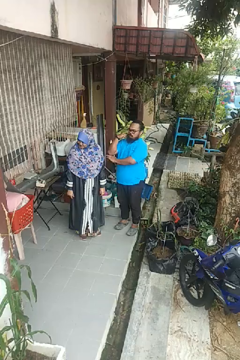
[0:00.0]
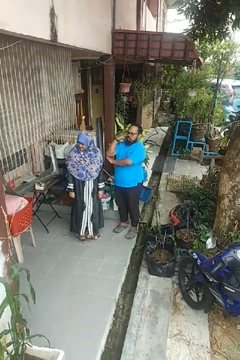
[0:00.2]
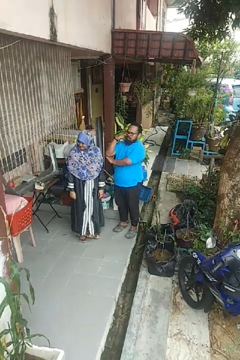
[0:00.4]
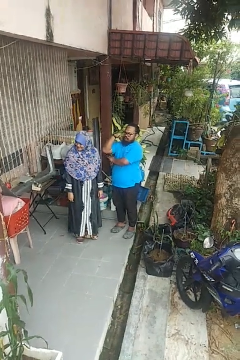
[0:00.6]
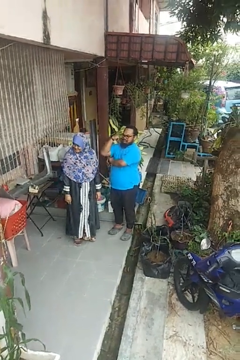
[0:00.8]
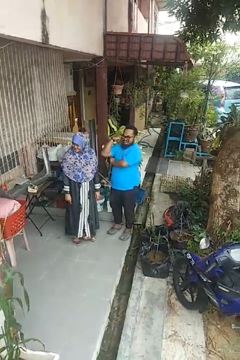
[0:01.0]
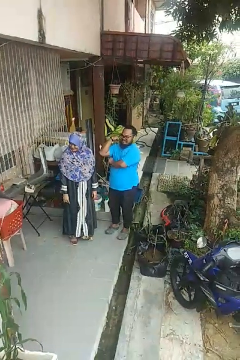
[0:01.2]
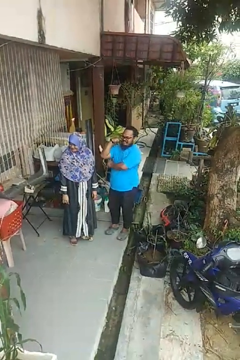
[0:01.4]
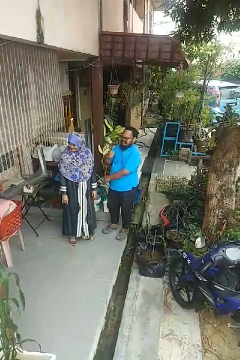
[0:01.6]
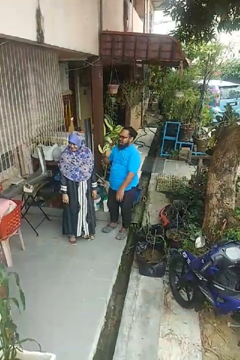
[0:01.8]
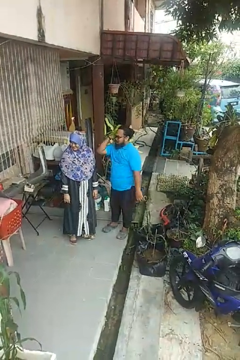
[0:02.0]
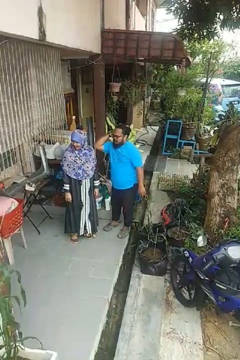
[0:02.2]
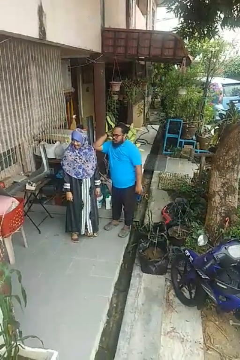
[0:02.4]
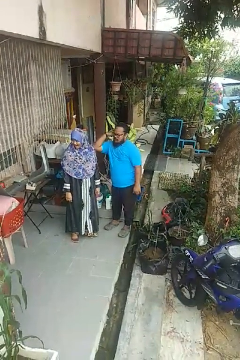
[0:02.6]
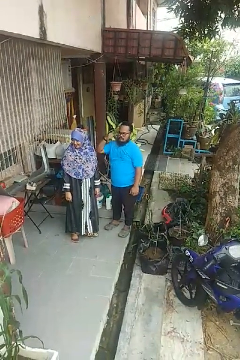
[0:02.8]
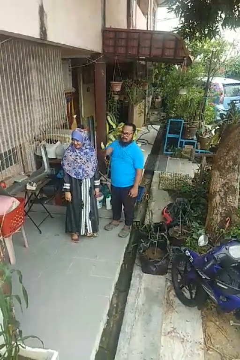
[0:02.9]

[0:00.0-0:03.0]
person nudges person with elbow

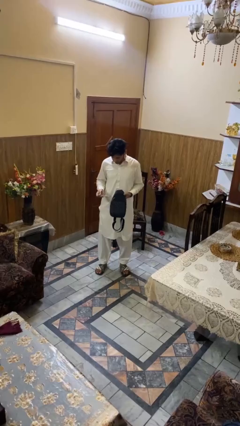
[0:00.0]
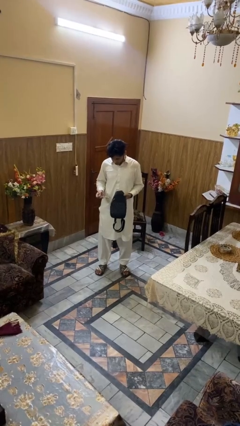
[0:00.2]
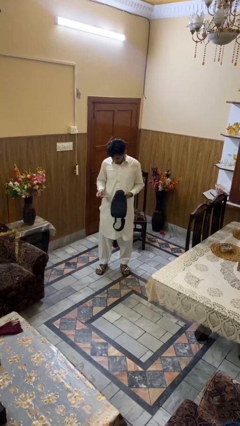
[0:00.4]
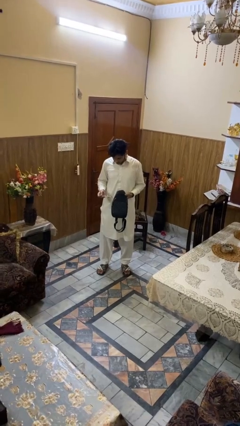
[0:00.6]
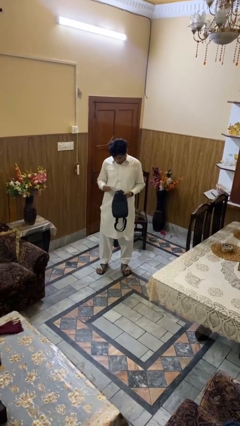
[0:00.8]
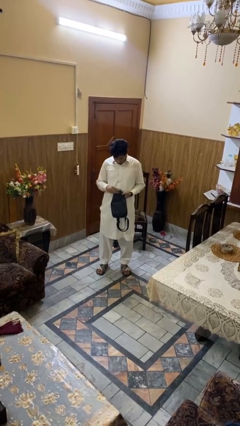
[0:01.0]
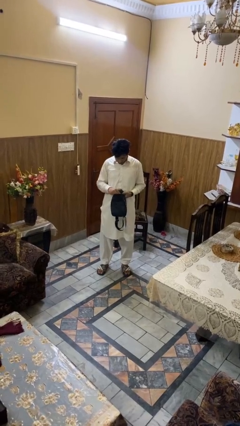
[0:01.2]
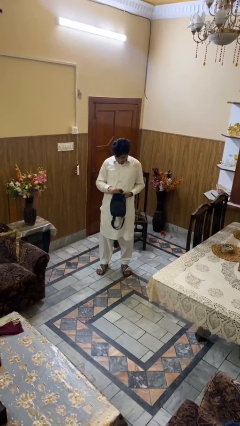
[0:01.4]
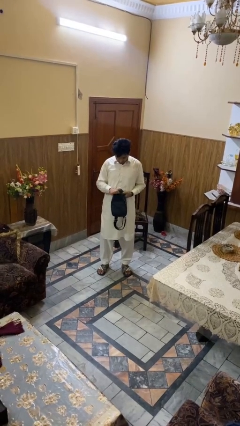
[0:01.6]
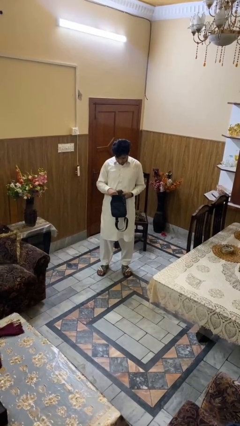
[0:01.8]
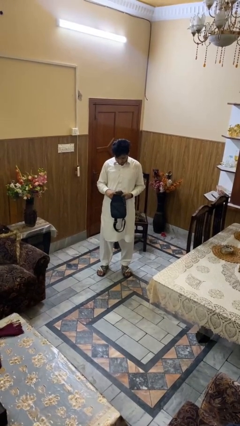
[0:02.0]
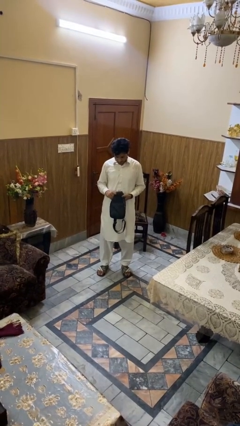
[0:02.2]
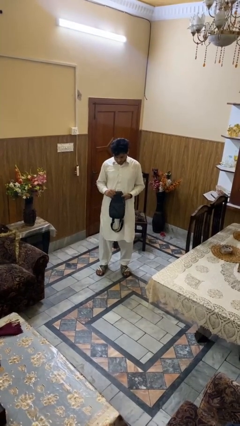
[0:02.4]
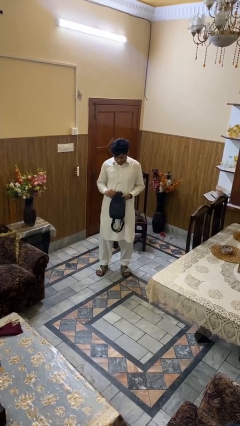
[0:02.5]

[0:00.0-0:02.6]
person puts object into purse

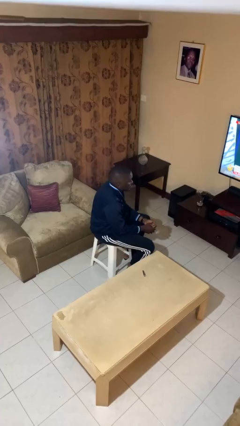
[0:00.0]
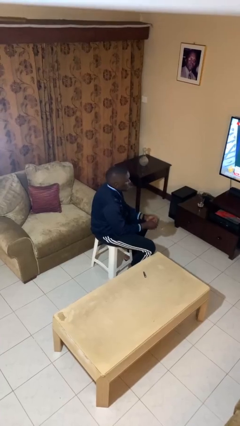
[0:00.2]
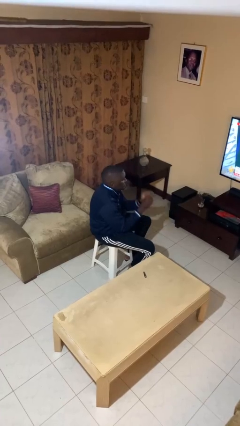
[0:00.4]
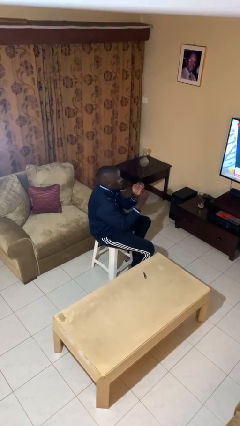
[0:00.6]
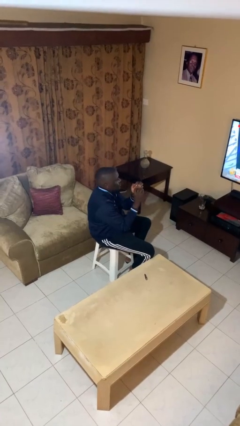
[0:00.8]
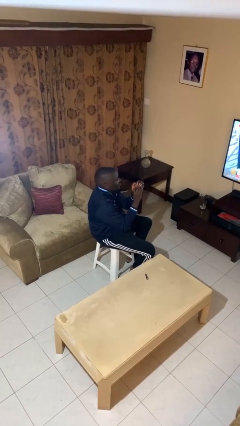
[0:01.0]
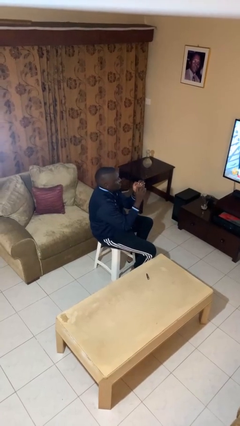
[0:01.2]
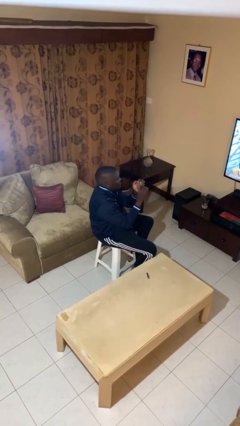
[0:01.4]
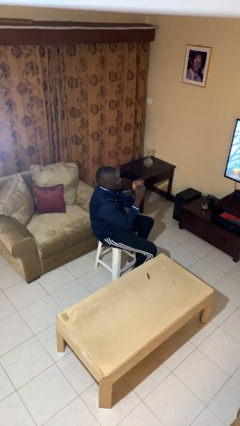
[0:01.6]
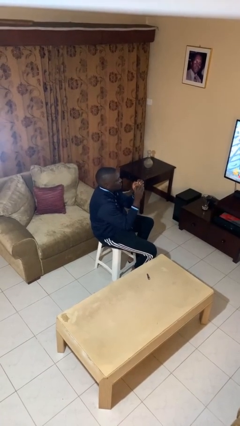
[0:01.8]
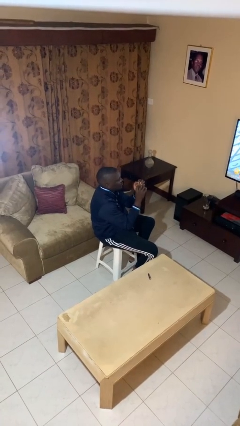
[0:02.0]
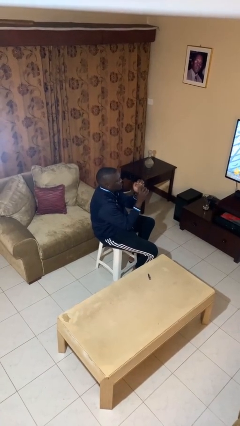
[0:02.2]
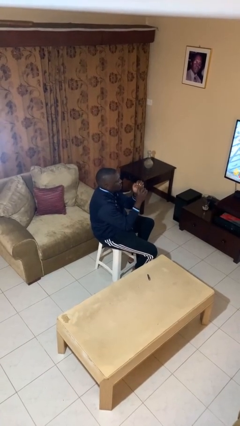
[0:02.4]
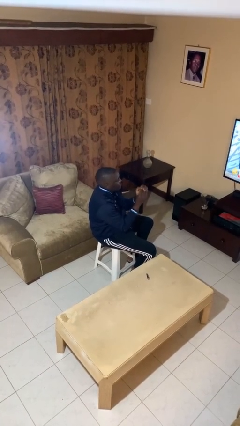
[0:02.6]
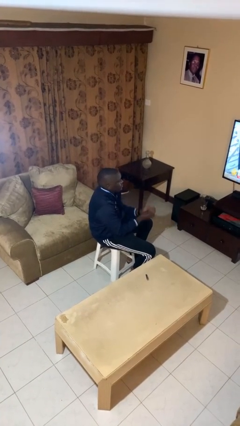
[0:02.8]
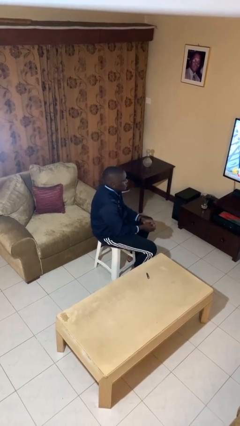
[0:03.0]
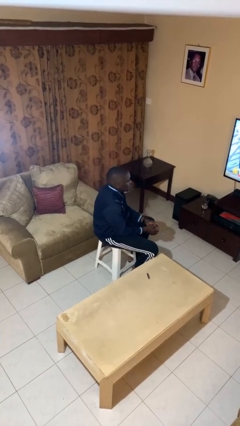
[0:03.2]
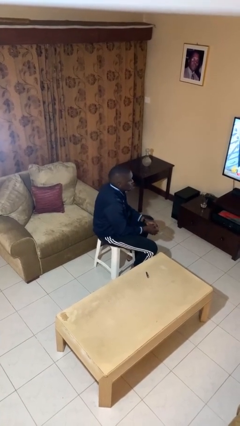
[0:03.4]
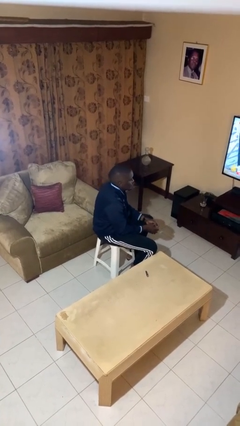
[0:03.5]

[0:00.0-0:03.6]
person files fingernails

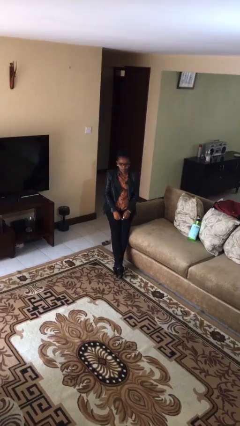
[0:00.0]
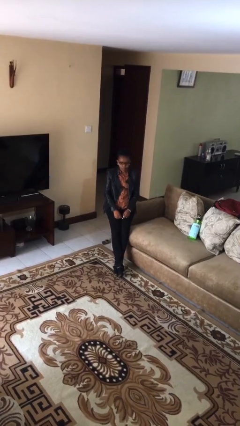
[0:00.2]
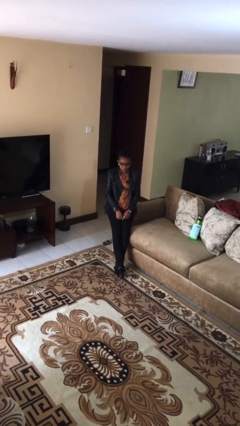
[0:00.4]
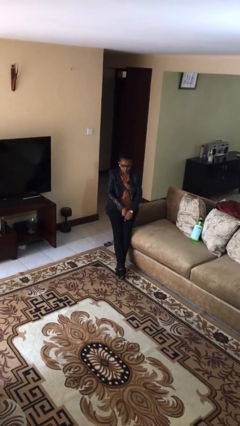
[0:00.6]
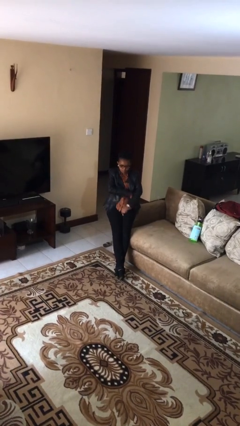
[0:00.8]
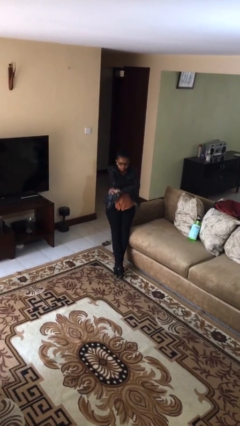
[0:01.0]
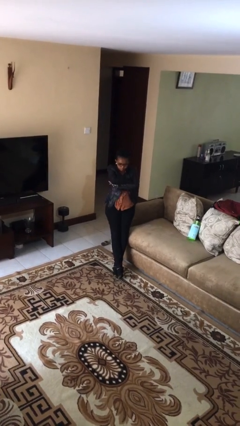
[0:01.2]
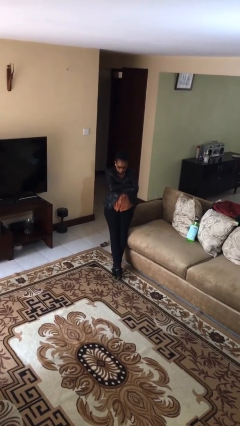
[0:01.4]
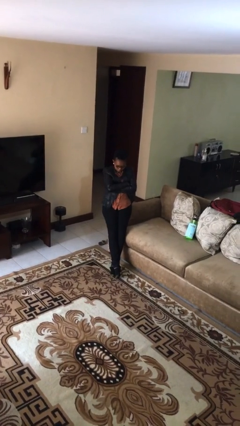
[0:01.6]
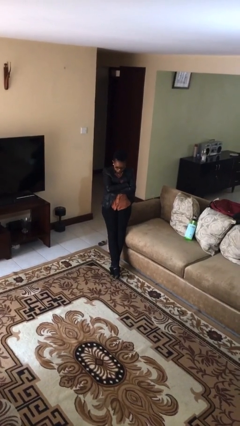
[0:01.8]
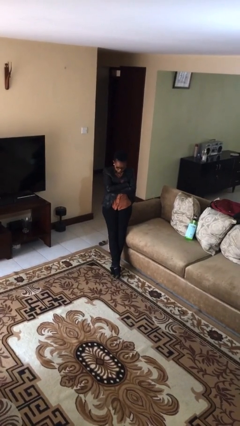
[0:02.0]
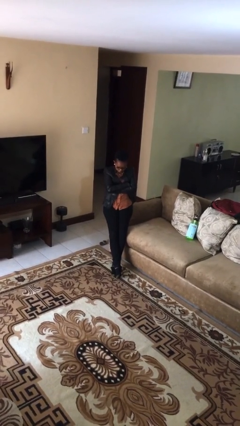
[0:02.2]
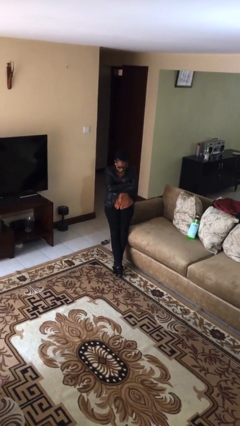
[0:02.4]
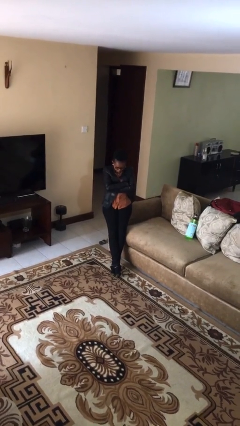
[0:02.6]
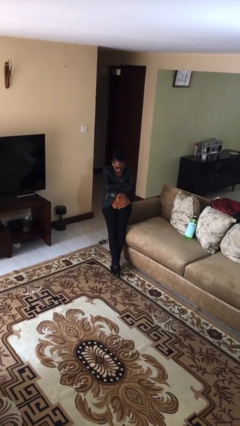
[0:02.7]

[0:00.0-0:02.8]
person crosses arms

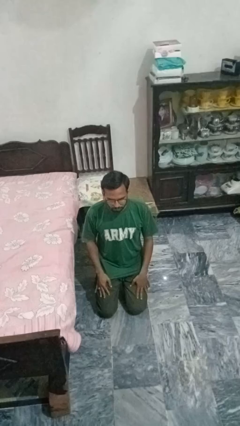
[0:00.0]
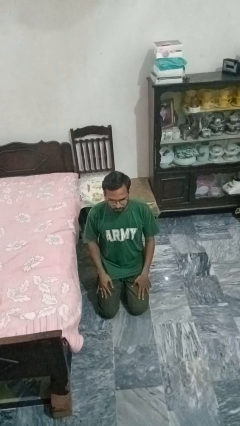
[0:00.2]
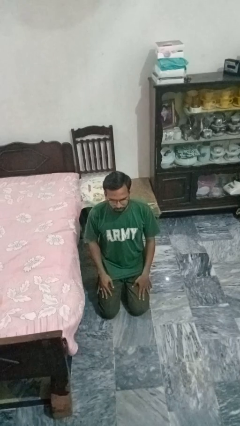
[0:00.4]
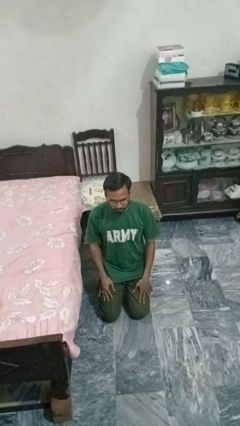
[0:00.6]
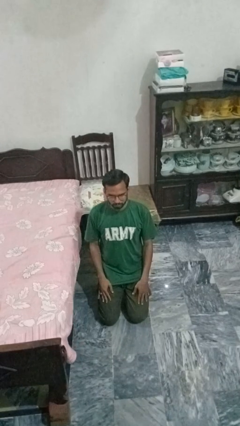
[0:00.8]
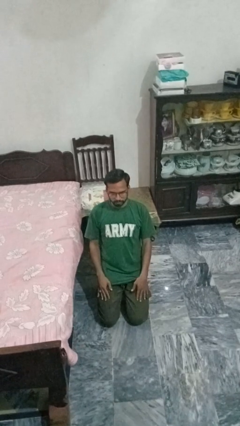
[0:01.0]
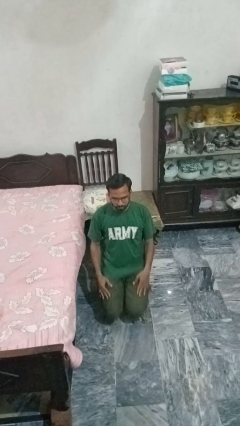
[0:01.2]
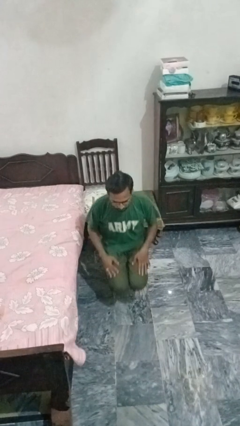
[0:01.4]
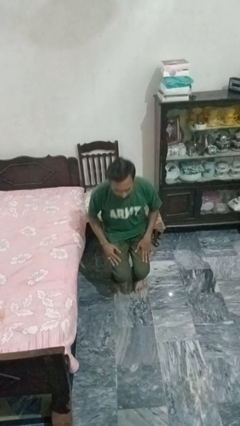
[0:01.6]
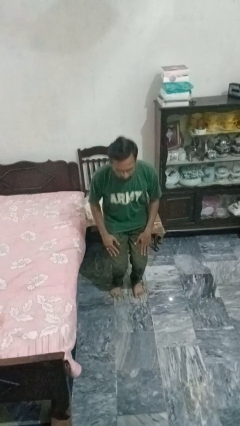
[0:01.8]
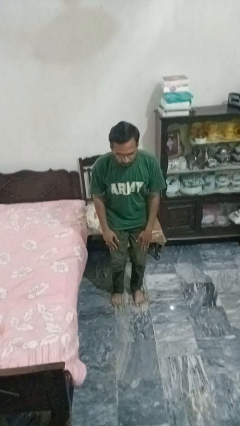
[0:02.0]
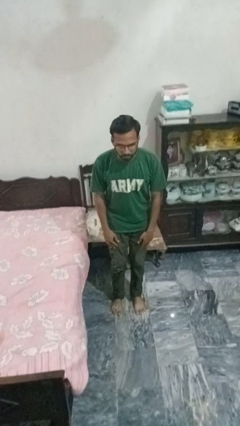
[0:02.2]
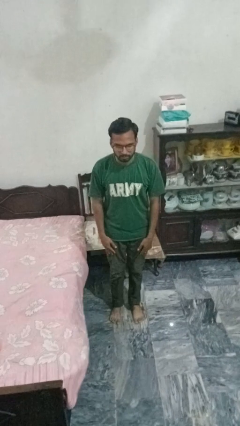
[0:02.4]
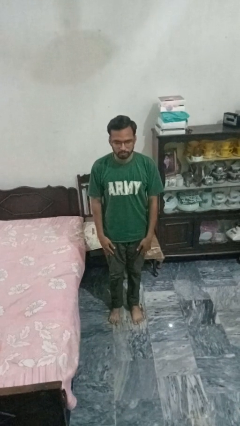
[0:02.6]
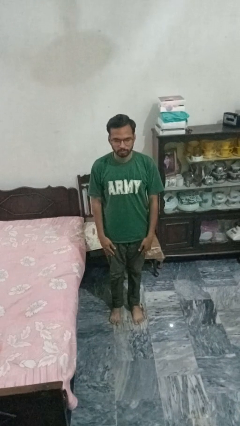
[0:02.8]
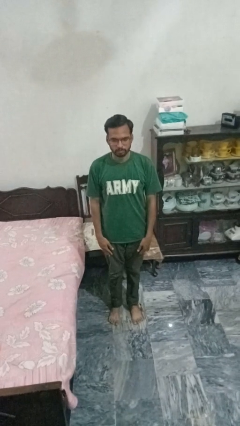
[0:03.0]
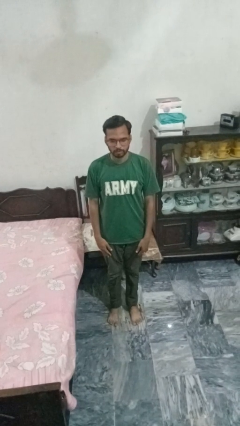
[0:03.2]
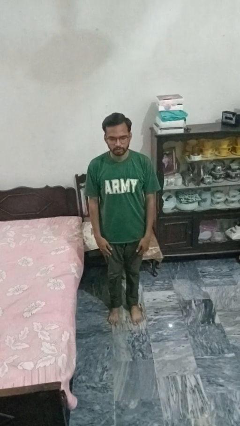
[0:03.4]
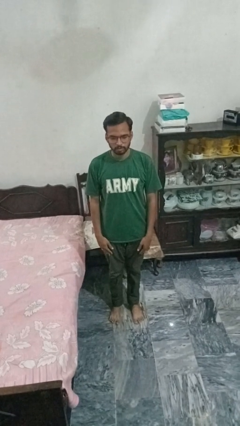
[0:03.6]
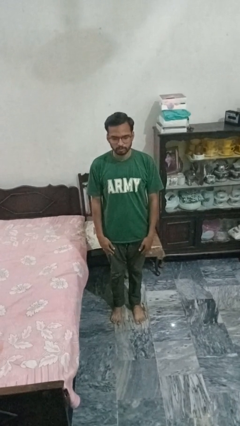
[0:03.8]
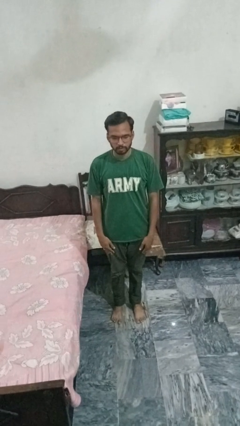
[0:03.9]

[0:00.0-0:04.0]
person stands up from floor

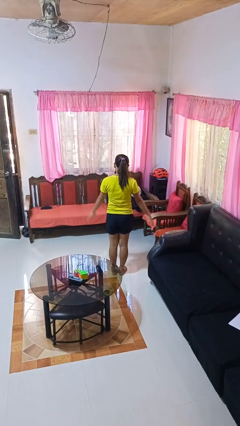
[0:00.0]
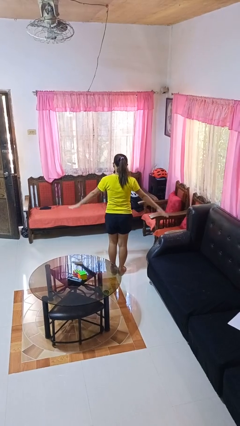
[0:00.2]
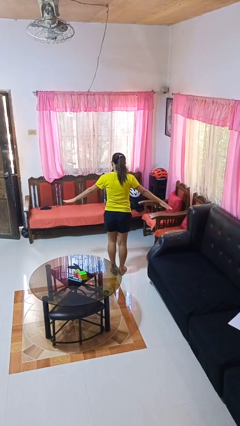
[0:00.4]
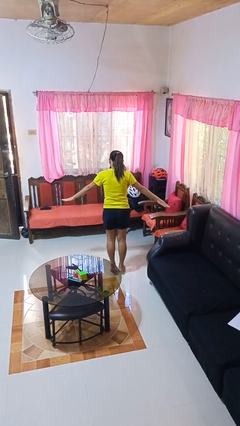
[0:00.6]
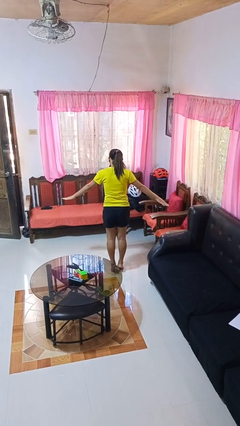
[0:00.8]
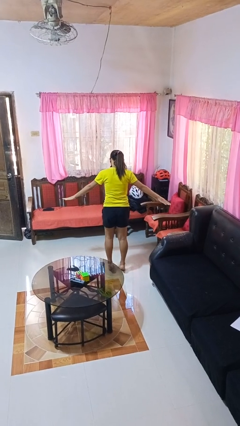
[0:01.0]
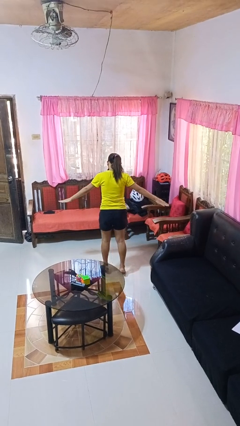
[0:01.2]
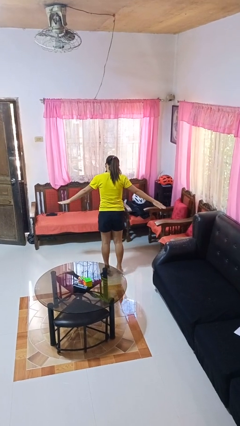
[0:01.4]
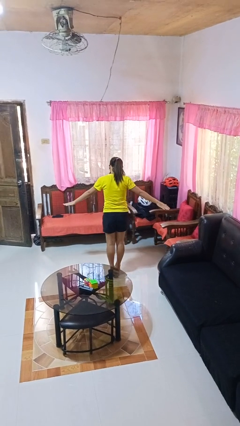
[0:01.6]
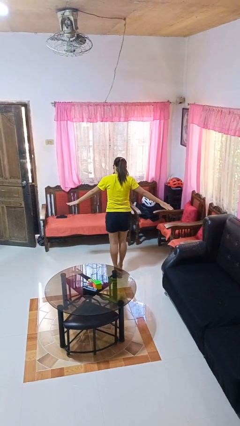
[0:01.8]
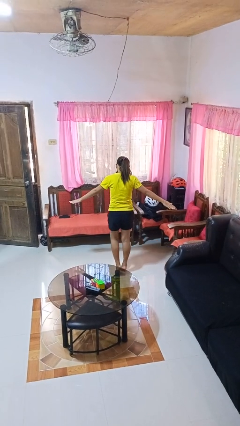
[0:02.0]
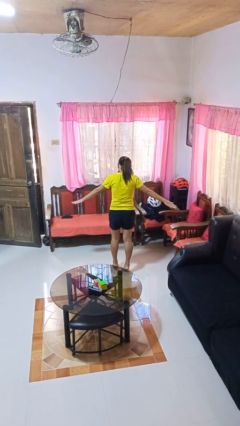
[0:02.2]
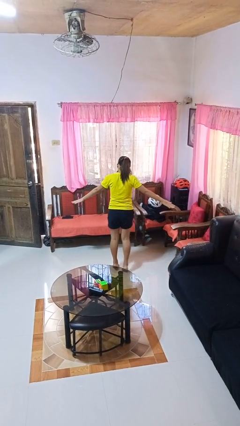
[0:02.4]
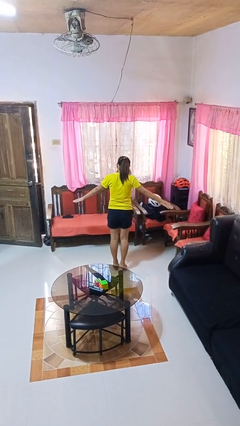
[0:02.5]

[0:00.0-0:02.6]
person walks tiptoe
